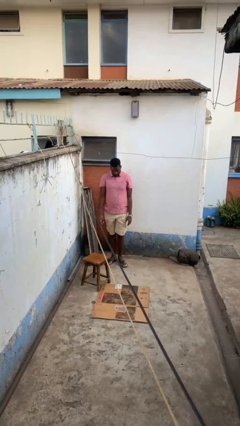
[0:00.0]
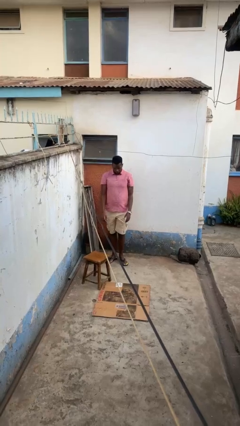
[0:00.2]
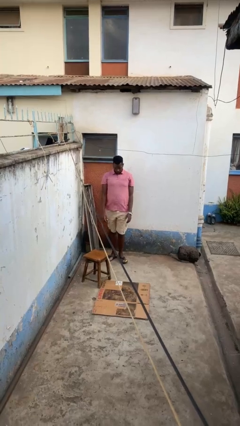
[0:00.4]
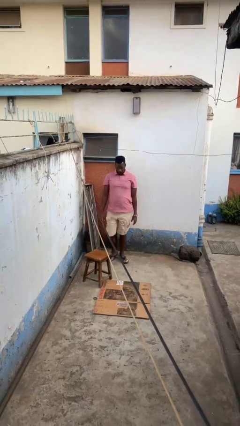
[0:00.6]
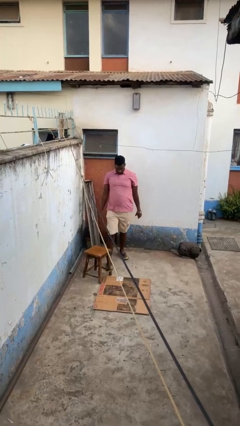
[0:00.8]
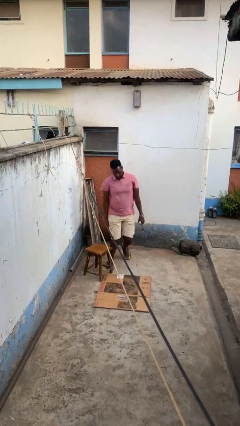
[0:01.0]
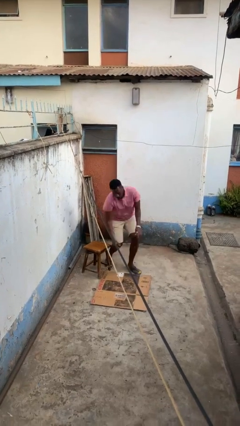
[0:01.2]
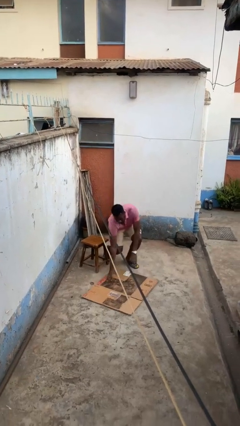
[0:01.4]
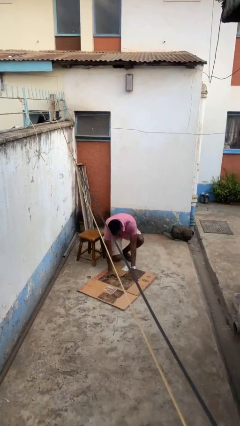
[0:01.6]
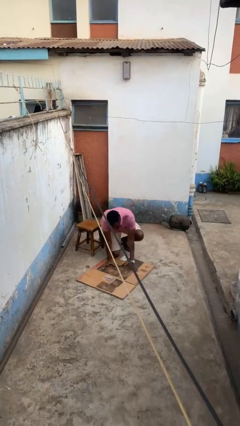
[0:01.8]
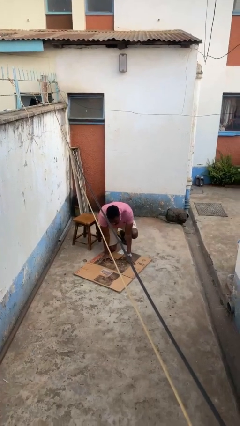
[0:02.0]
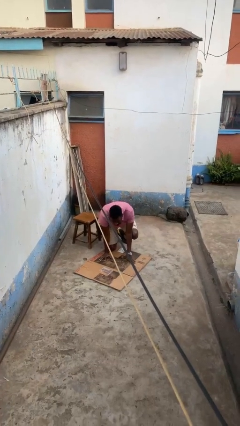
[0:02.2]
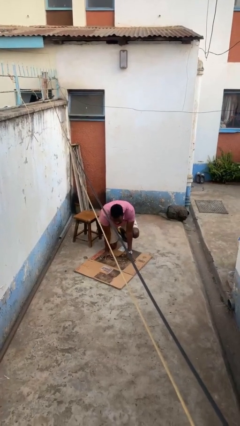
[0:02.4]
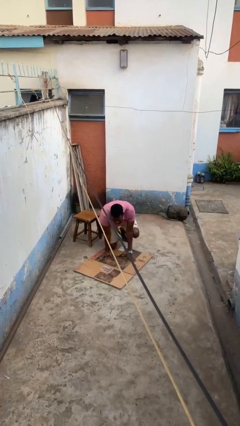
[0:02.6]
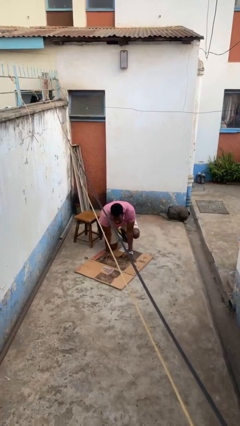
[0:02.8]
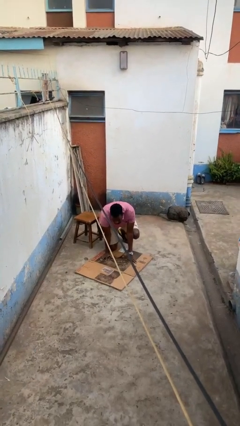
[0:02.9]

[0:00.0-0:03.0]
person trips on object on floor

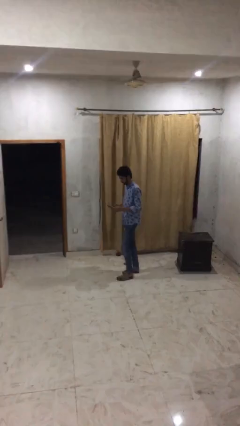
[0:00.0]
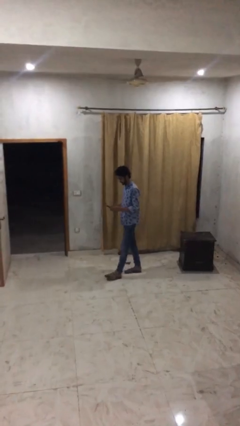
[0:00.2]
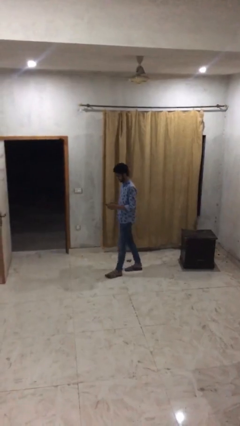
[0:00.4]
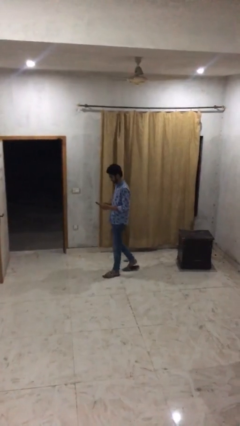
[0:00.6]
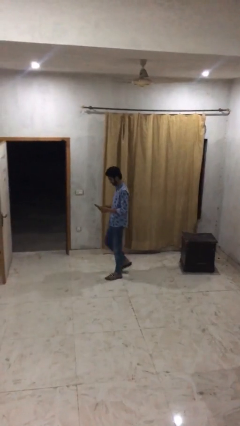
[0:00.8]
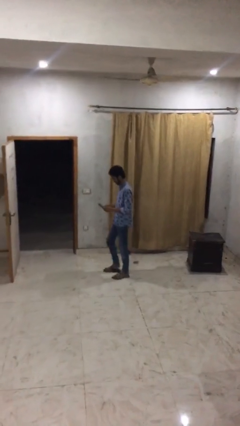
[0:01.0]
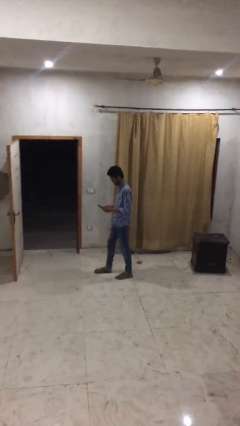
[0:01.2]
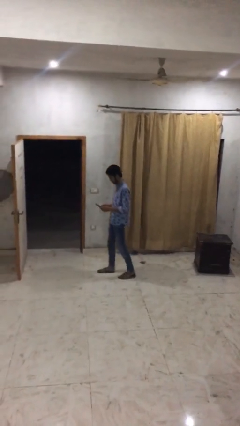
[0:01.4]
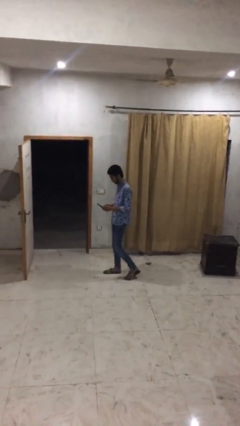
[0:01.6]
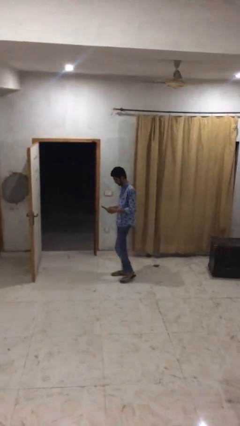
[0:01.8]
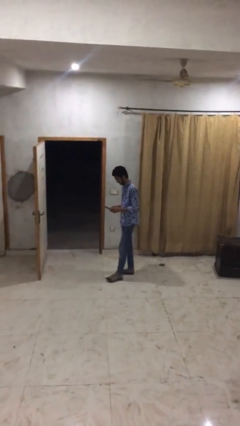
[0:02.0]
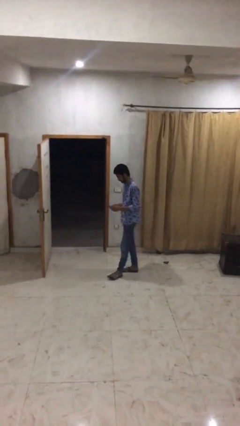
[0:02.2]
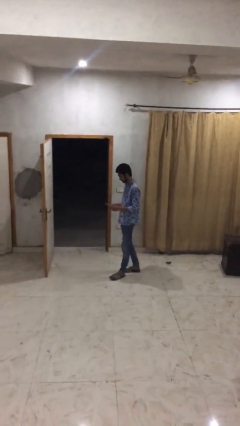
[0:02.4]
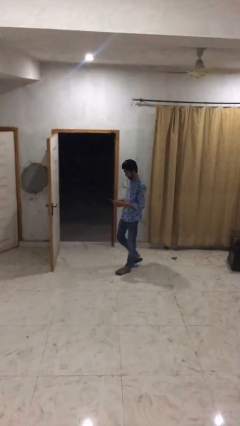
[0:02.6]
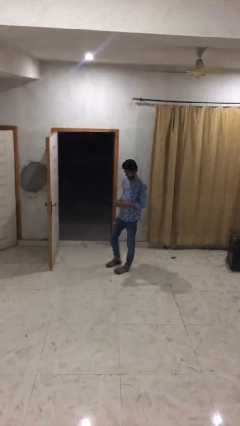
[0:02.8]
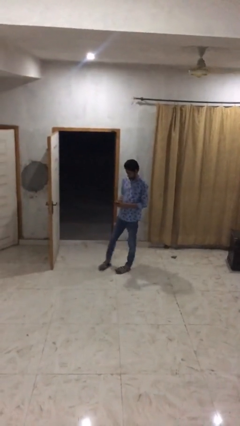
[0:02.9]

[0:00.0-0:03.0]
person texts on phone

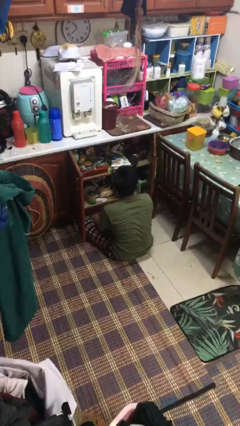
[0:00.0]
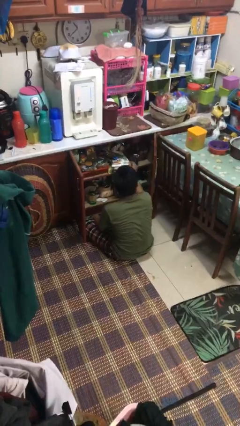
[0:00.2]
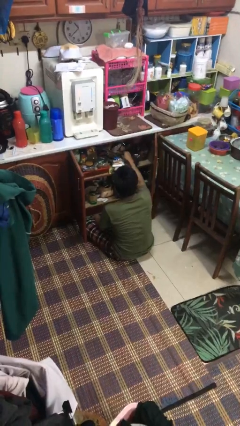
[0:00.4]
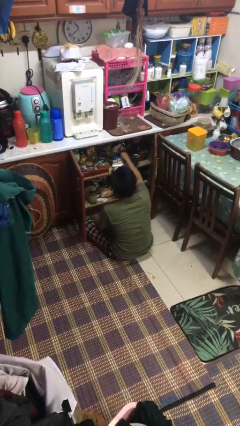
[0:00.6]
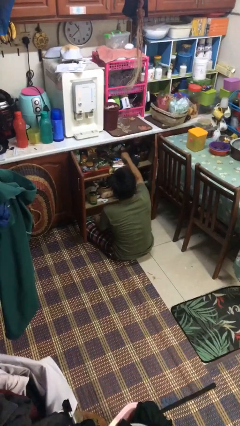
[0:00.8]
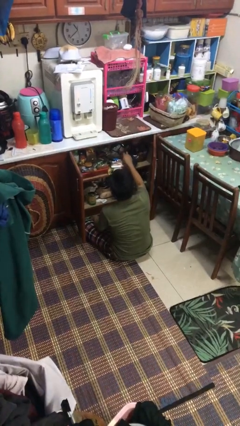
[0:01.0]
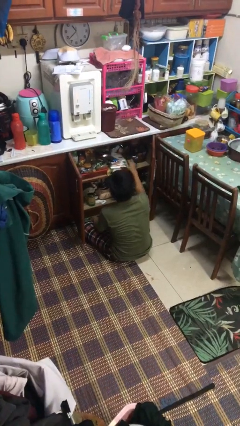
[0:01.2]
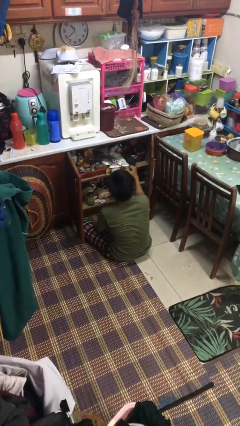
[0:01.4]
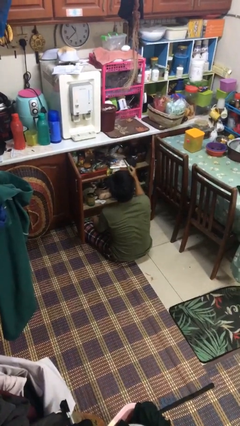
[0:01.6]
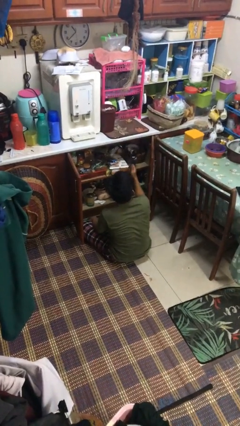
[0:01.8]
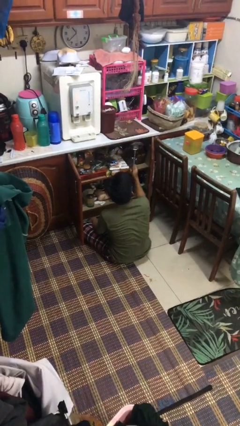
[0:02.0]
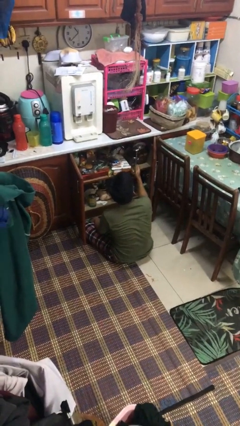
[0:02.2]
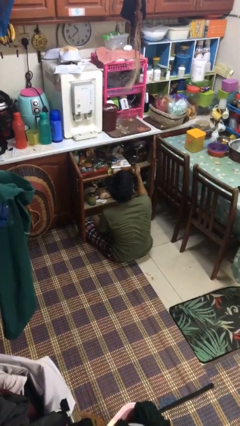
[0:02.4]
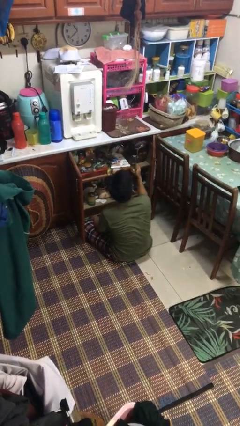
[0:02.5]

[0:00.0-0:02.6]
person takes object from kitchen drawer

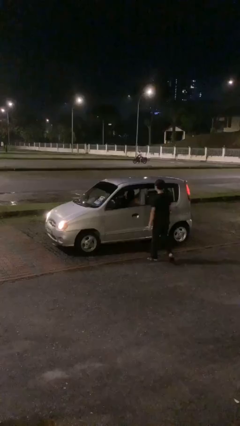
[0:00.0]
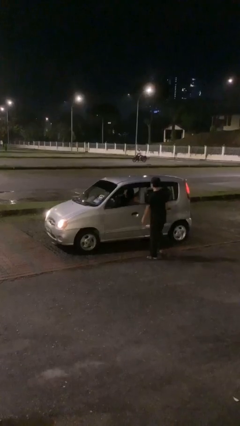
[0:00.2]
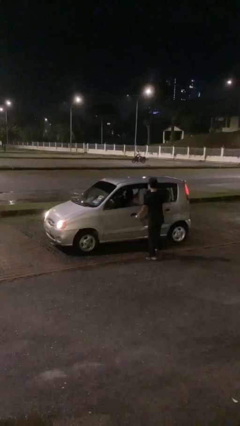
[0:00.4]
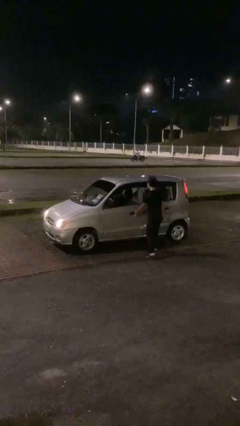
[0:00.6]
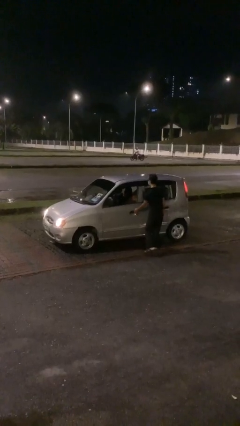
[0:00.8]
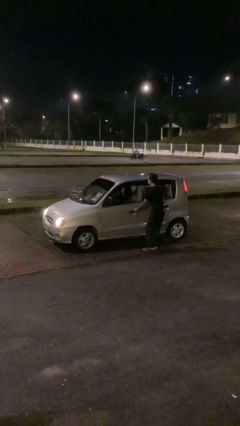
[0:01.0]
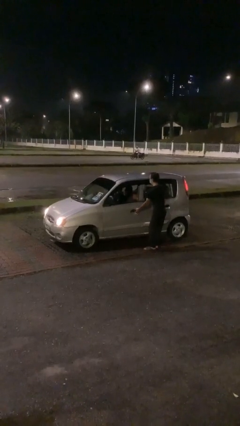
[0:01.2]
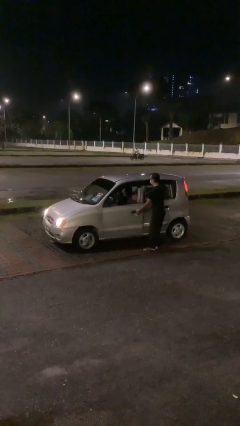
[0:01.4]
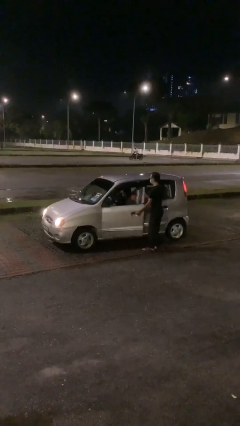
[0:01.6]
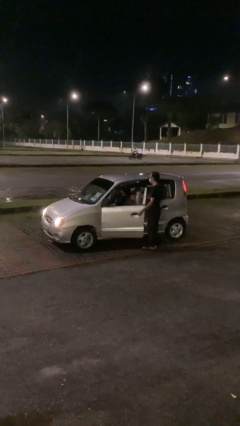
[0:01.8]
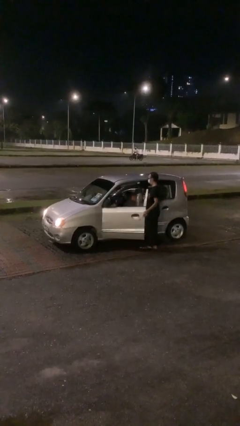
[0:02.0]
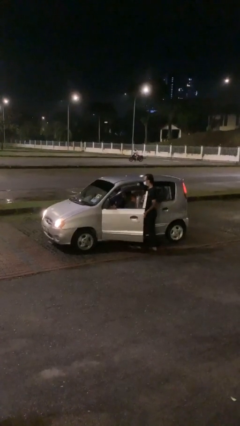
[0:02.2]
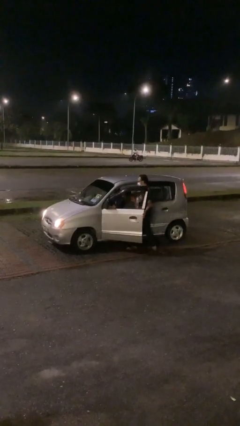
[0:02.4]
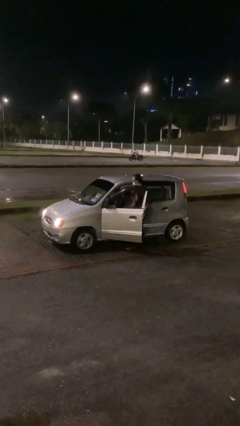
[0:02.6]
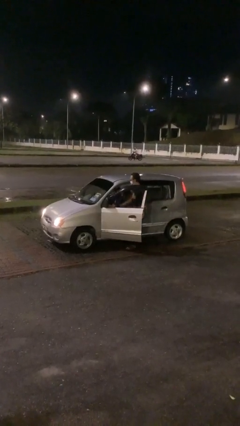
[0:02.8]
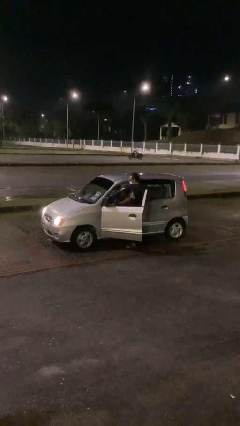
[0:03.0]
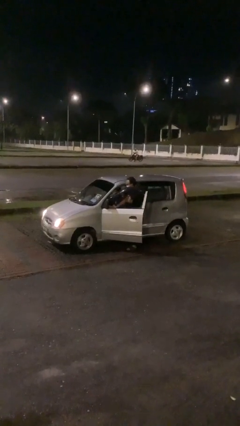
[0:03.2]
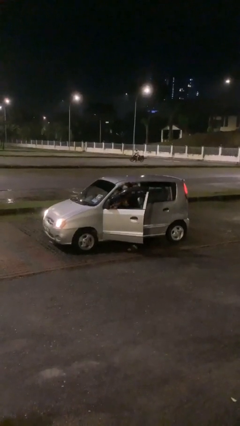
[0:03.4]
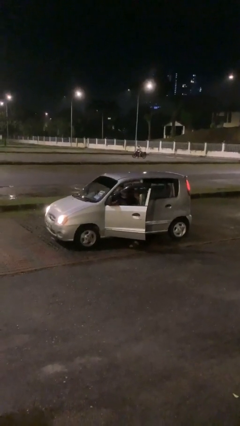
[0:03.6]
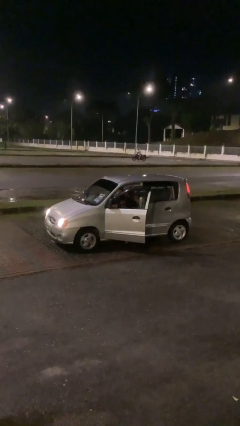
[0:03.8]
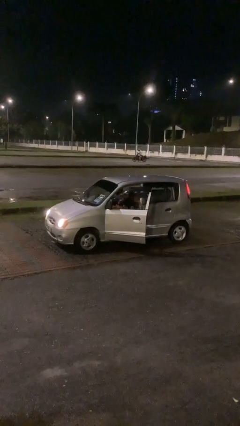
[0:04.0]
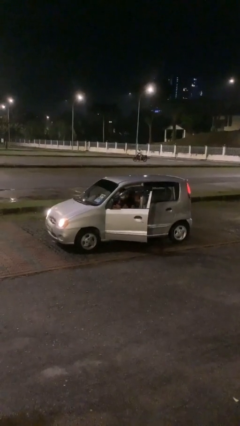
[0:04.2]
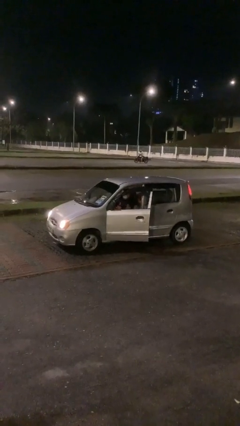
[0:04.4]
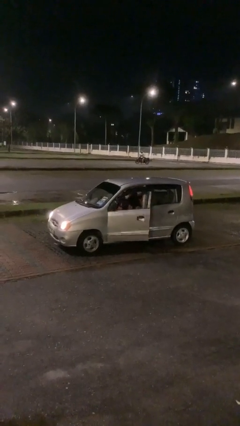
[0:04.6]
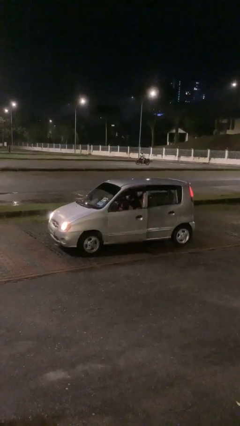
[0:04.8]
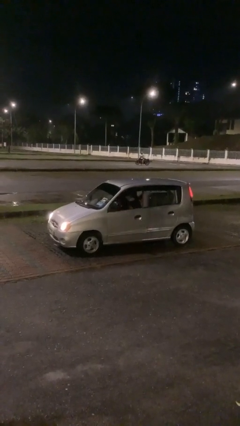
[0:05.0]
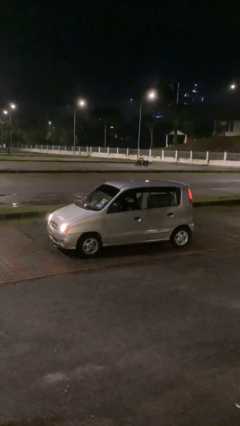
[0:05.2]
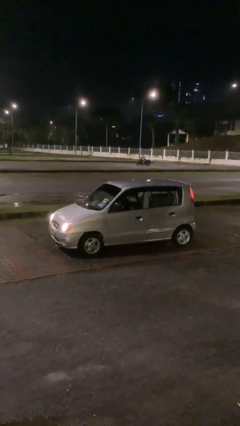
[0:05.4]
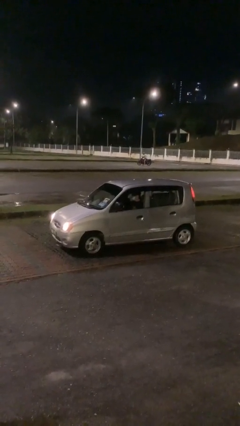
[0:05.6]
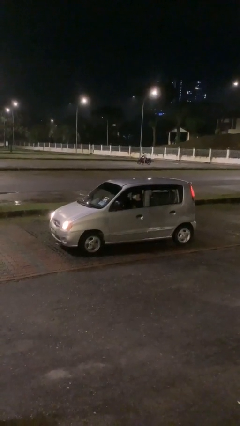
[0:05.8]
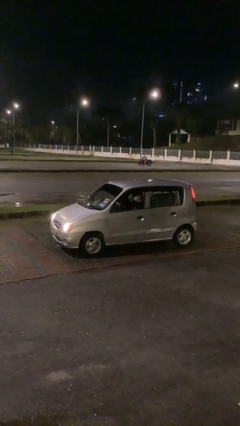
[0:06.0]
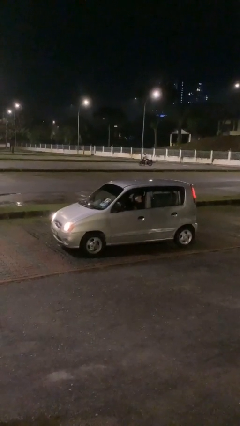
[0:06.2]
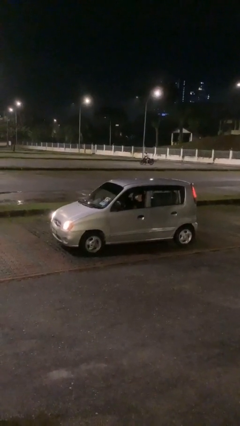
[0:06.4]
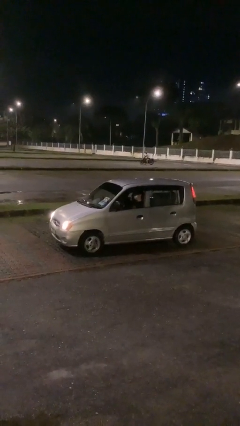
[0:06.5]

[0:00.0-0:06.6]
car picks up person

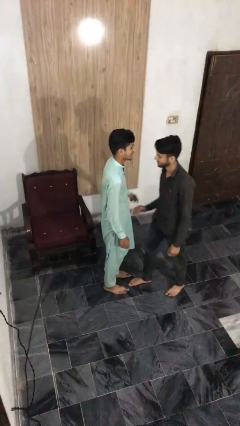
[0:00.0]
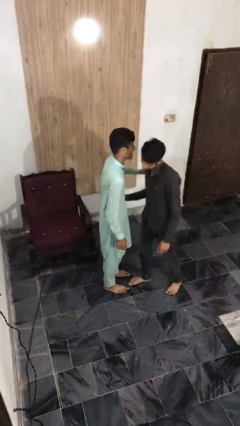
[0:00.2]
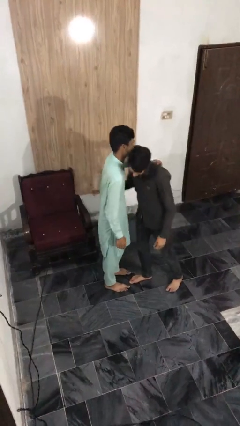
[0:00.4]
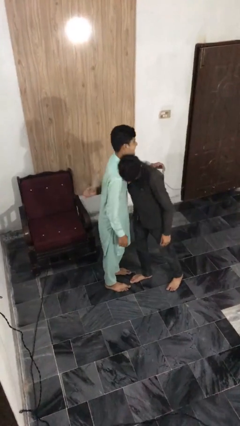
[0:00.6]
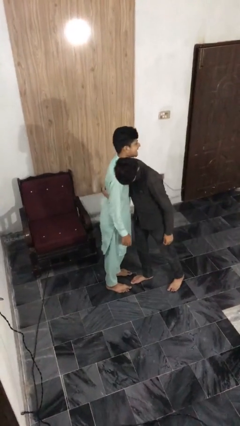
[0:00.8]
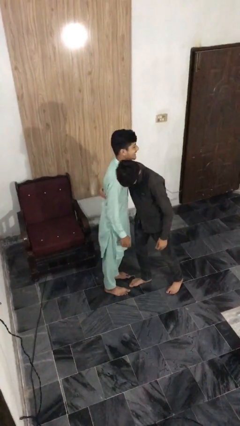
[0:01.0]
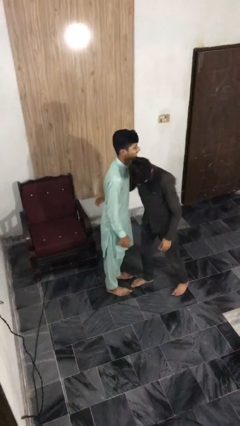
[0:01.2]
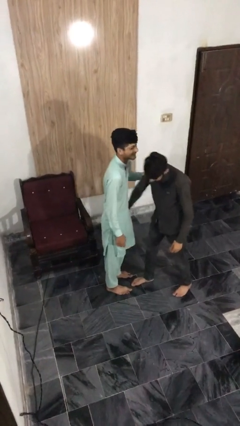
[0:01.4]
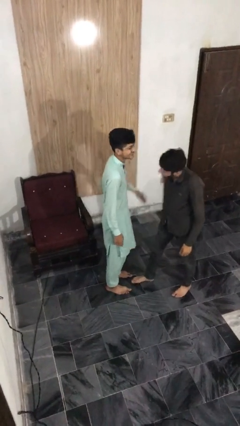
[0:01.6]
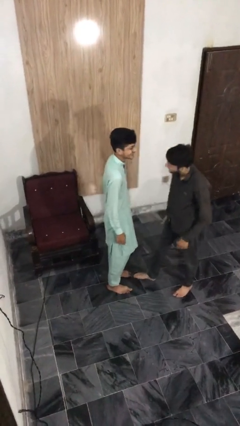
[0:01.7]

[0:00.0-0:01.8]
person embraces person

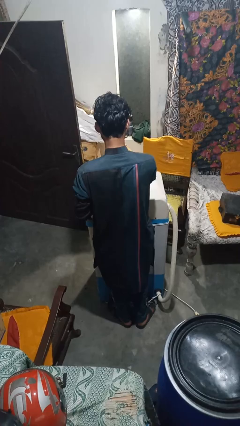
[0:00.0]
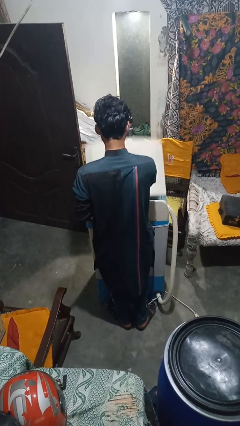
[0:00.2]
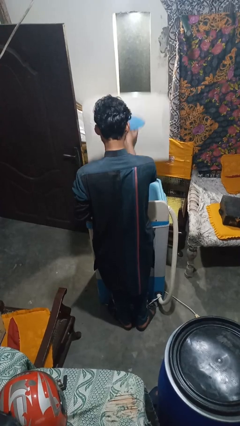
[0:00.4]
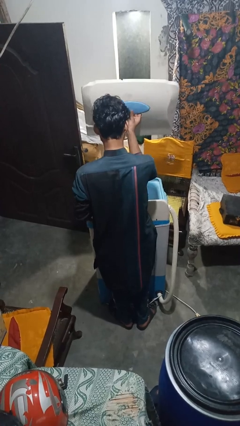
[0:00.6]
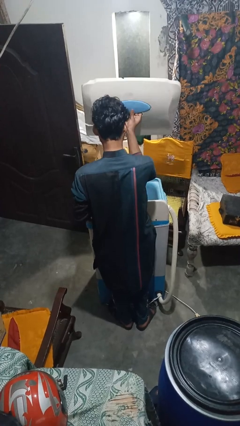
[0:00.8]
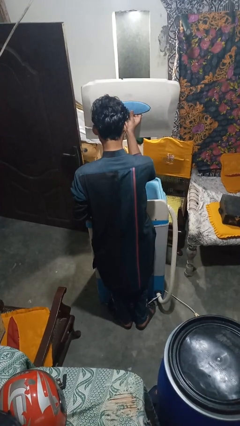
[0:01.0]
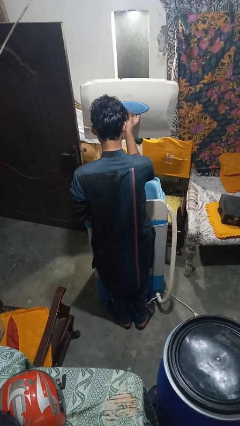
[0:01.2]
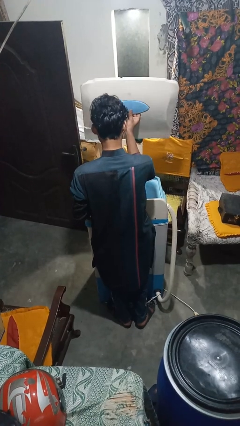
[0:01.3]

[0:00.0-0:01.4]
person opens clothes washer
